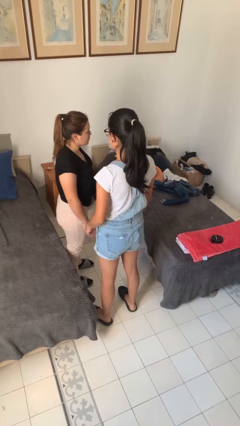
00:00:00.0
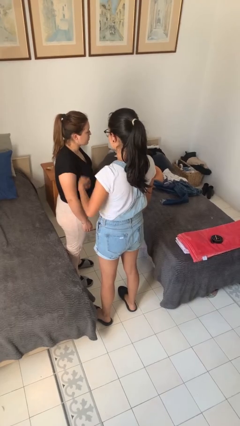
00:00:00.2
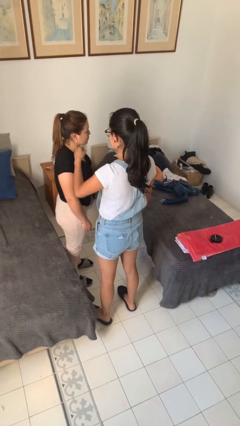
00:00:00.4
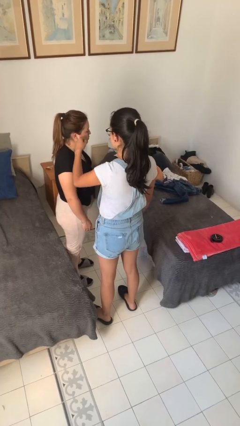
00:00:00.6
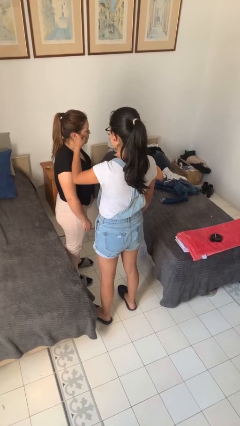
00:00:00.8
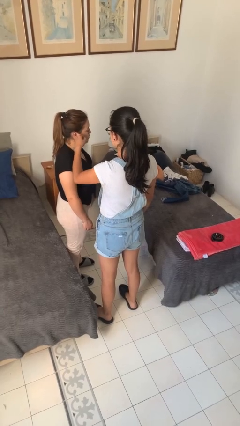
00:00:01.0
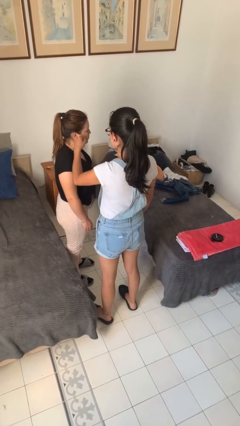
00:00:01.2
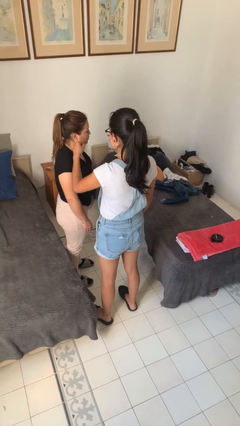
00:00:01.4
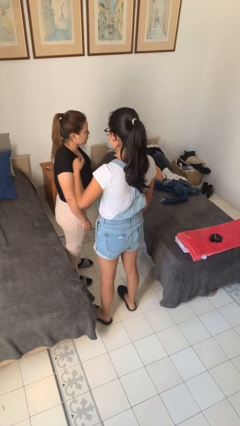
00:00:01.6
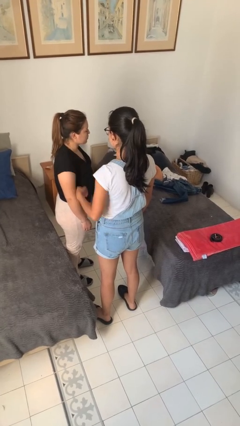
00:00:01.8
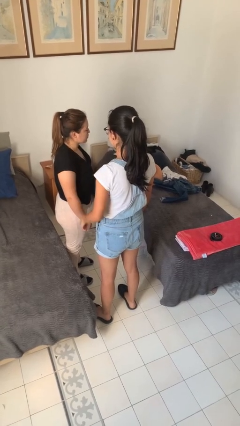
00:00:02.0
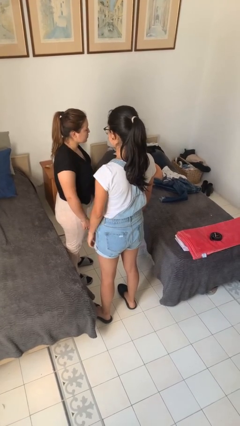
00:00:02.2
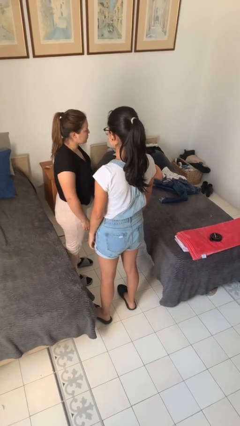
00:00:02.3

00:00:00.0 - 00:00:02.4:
person touches face of person

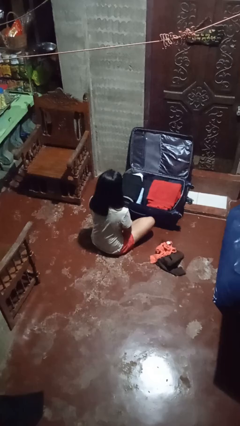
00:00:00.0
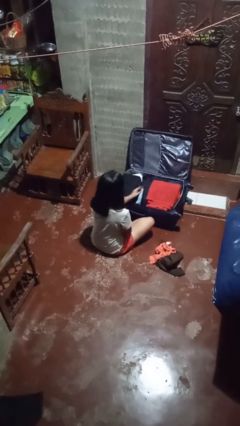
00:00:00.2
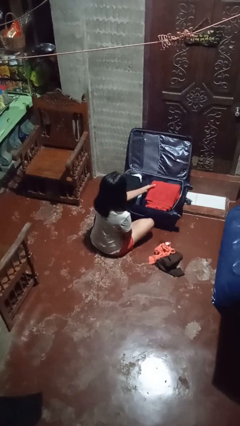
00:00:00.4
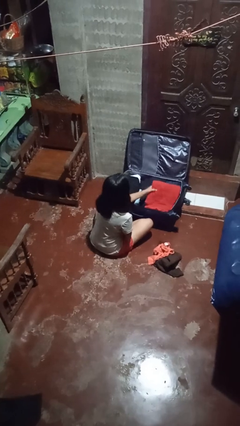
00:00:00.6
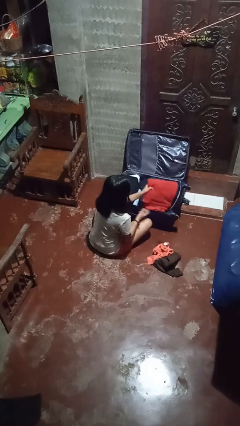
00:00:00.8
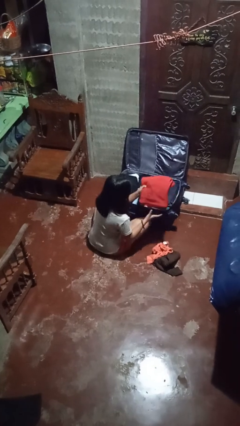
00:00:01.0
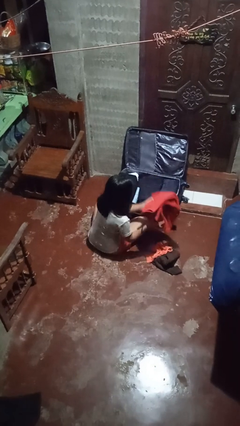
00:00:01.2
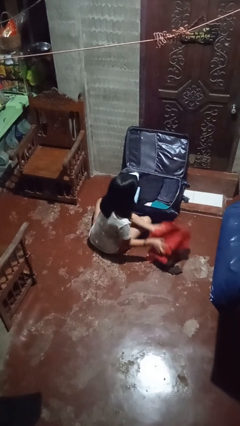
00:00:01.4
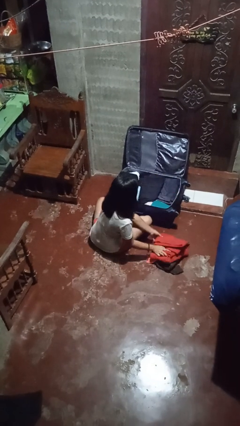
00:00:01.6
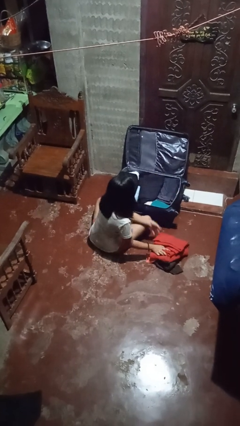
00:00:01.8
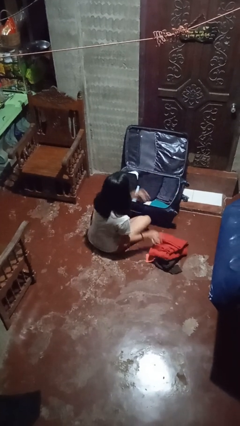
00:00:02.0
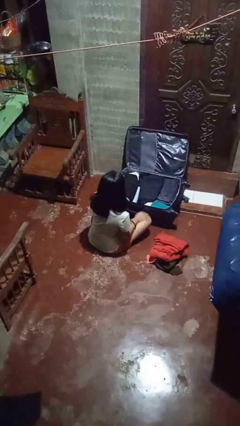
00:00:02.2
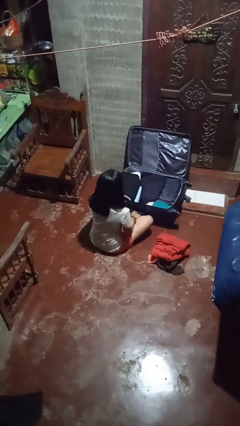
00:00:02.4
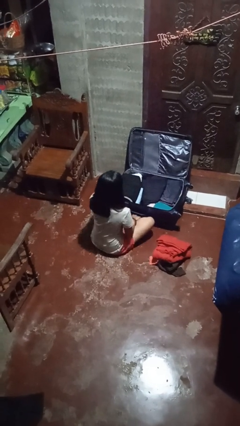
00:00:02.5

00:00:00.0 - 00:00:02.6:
person unloads clothes from suitcase

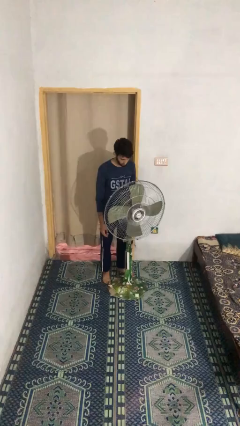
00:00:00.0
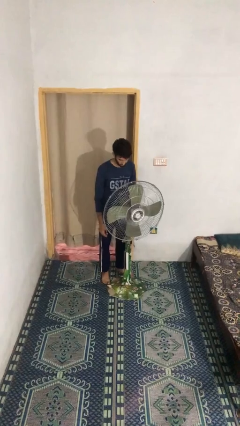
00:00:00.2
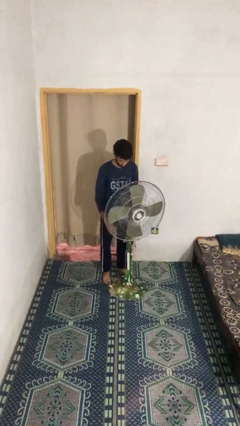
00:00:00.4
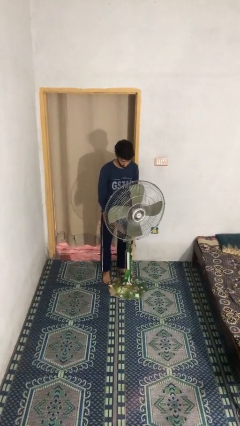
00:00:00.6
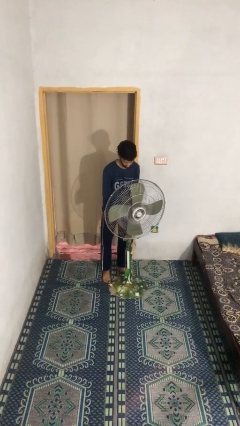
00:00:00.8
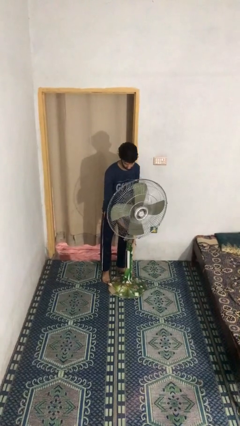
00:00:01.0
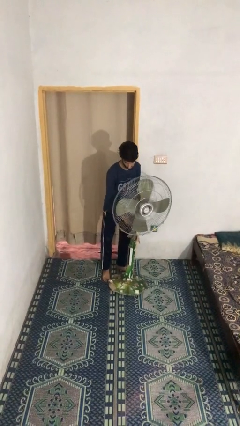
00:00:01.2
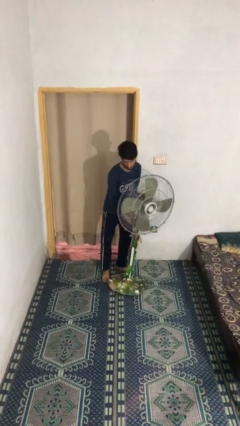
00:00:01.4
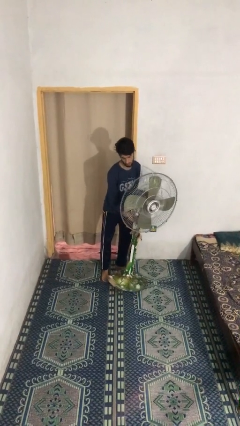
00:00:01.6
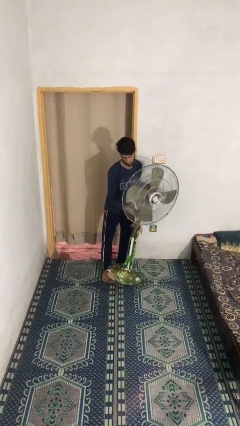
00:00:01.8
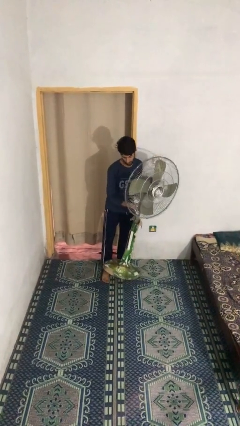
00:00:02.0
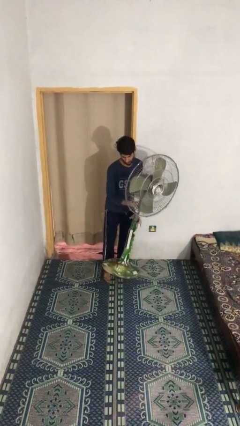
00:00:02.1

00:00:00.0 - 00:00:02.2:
person picks up object from floor

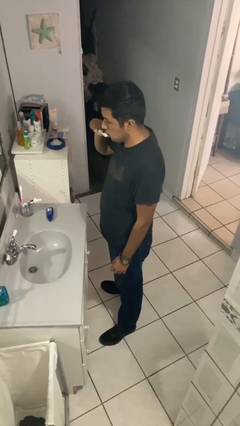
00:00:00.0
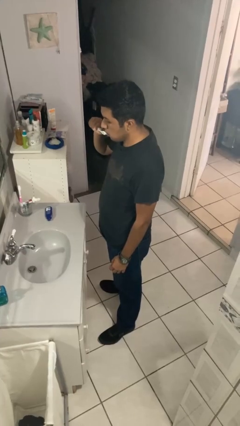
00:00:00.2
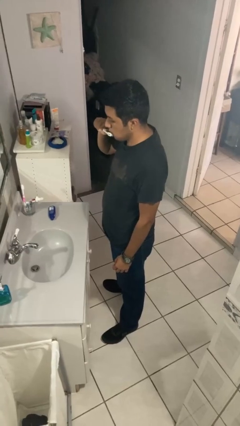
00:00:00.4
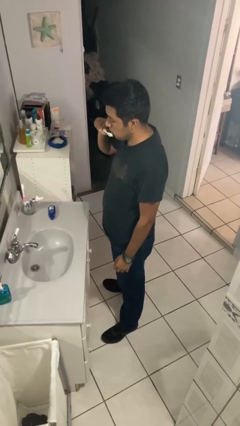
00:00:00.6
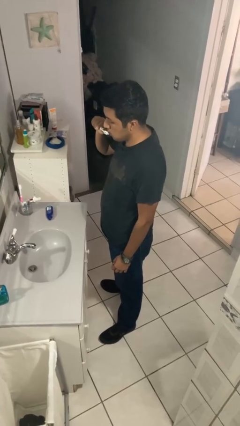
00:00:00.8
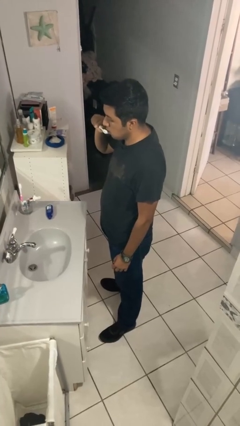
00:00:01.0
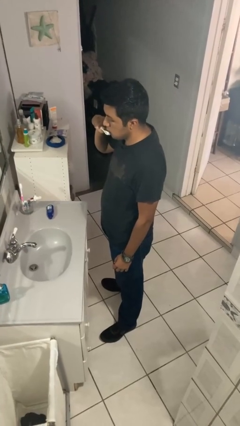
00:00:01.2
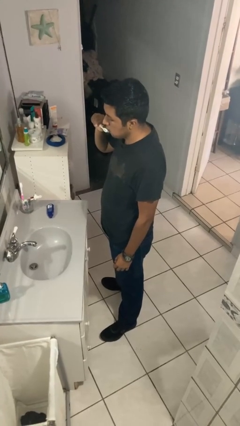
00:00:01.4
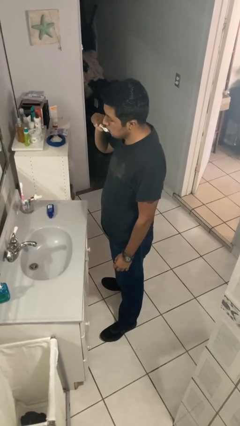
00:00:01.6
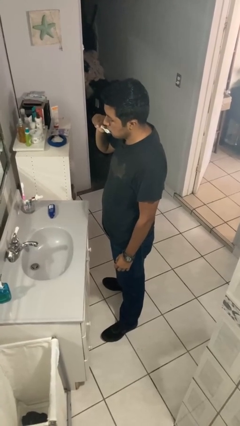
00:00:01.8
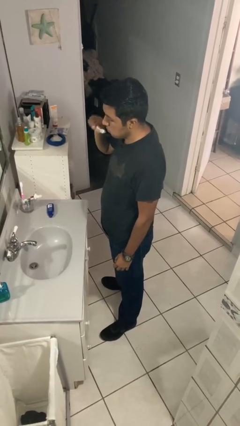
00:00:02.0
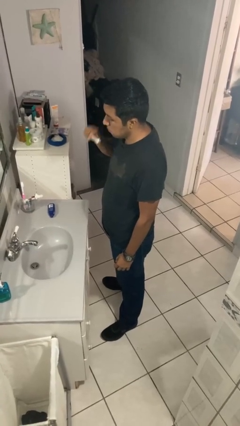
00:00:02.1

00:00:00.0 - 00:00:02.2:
person brushes teeth

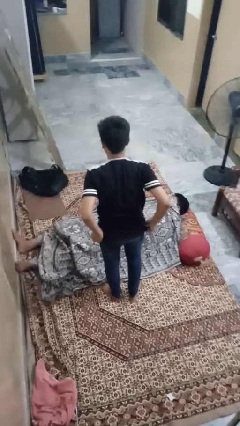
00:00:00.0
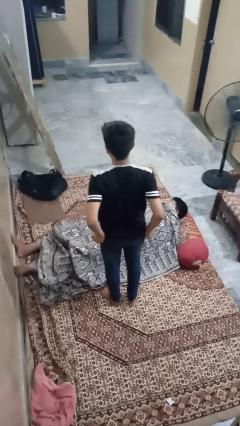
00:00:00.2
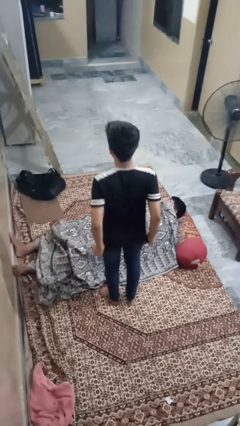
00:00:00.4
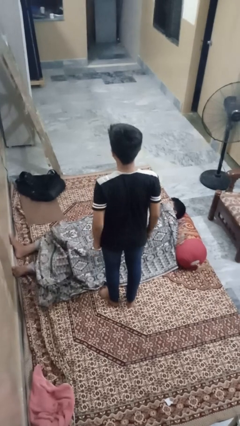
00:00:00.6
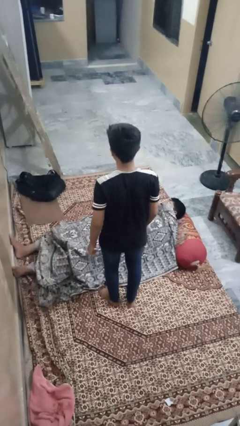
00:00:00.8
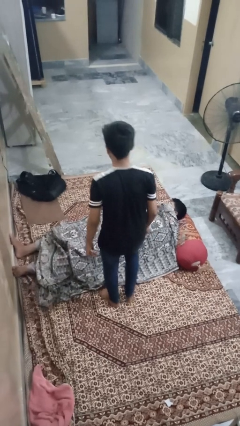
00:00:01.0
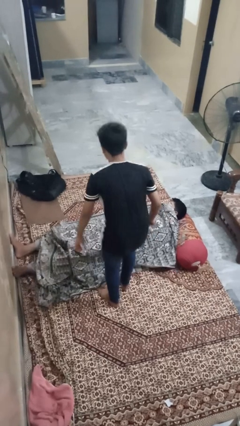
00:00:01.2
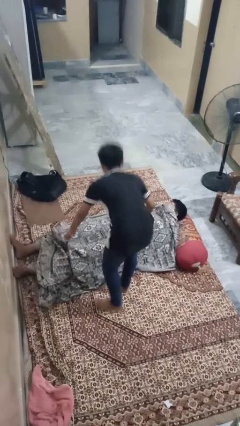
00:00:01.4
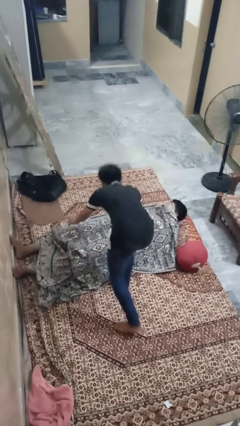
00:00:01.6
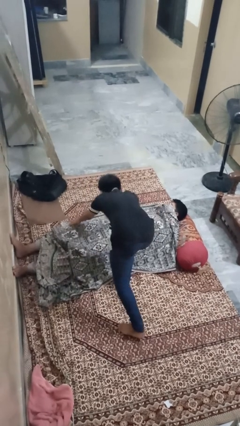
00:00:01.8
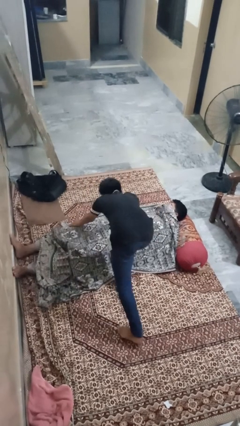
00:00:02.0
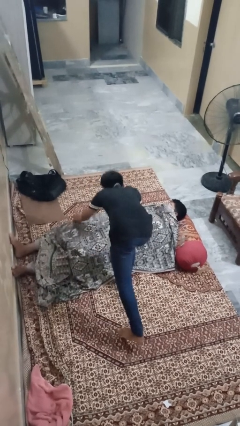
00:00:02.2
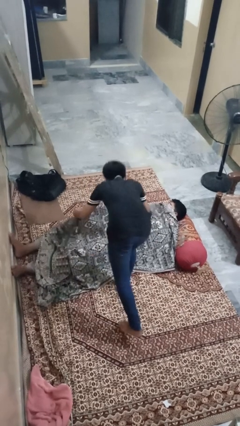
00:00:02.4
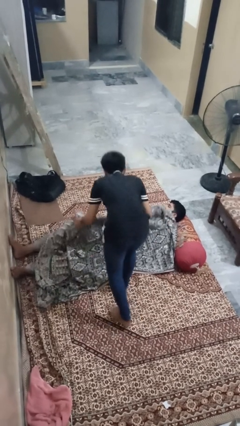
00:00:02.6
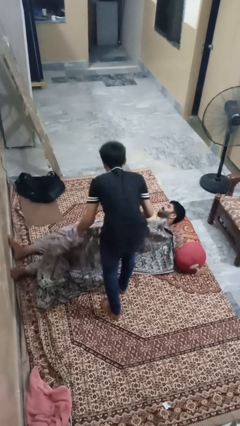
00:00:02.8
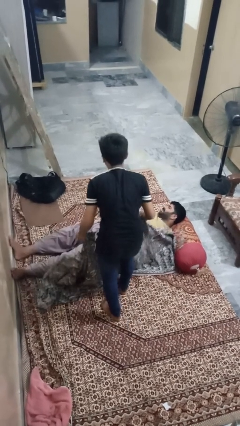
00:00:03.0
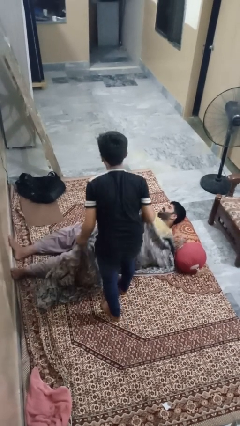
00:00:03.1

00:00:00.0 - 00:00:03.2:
person uncovers friend with blanket

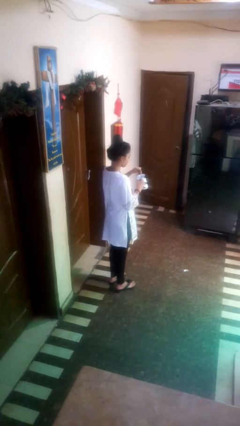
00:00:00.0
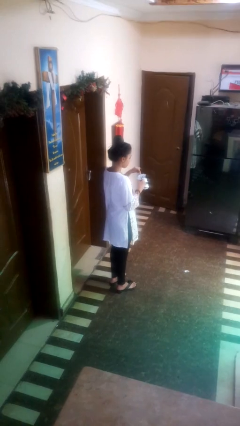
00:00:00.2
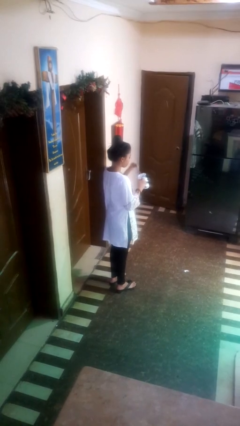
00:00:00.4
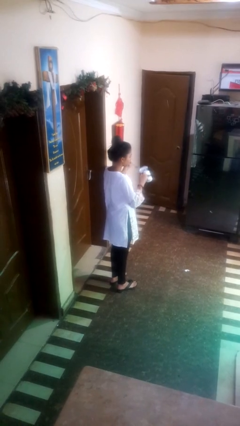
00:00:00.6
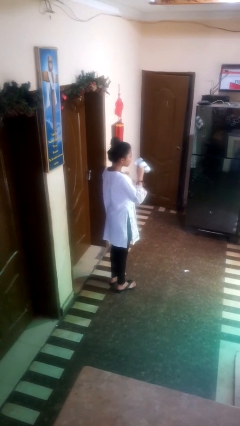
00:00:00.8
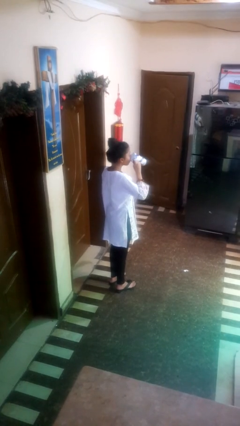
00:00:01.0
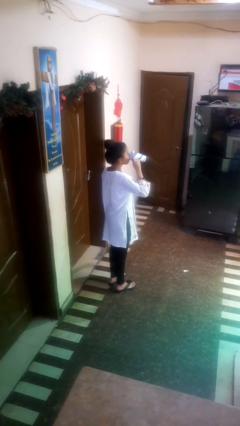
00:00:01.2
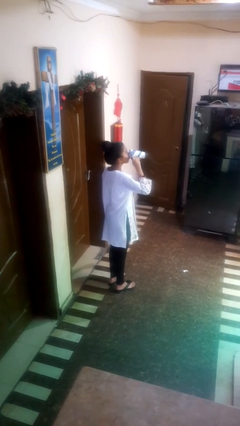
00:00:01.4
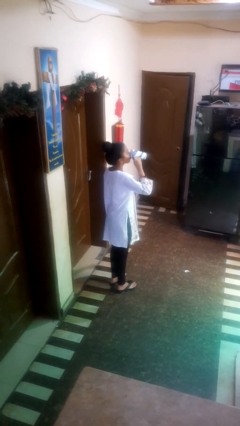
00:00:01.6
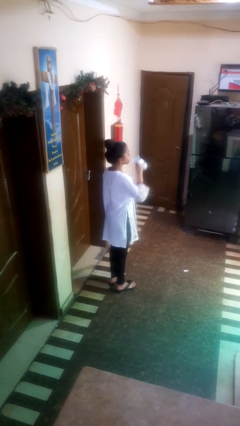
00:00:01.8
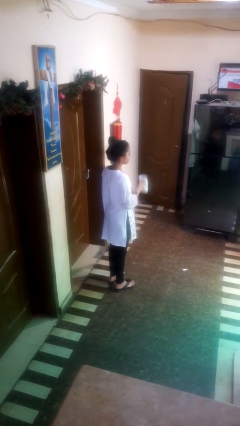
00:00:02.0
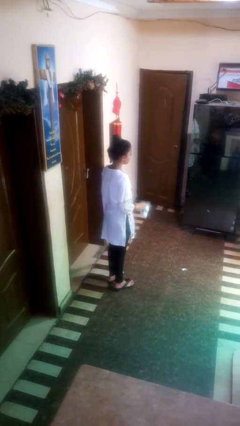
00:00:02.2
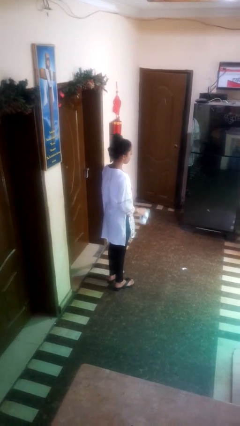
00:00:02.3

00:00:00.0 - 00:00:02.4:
person drinks from mug

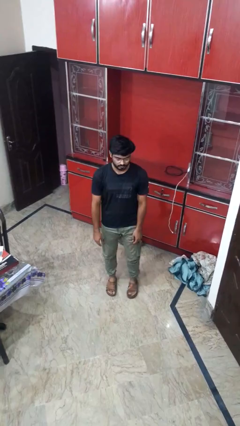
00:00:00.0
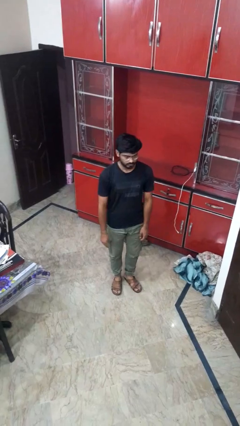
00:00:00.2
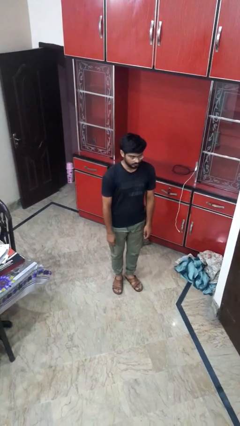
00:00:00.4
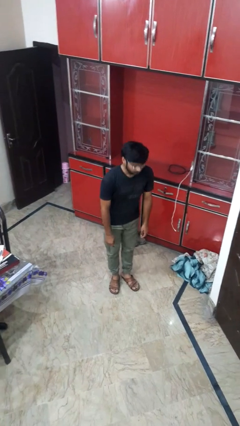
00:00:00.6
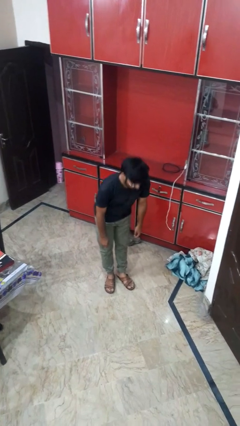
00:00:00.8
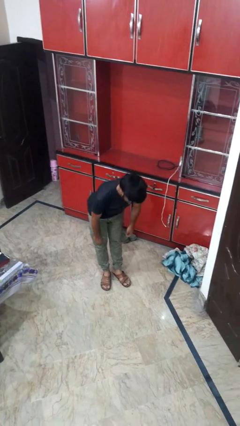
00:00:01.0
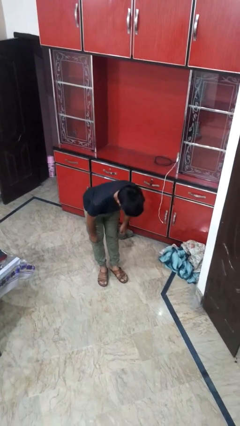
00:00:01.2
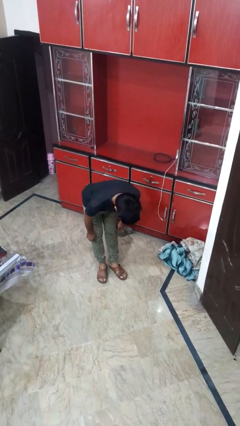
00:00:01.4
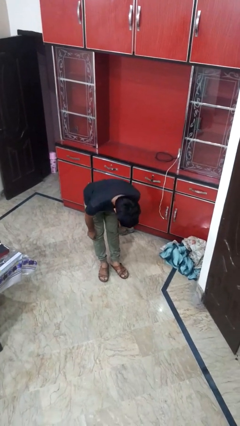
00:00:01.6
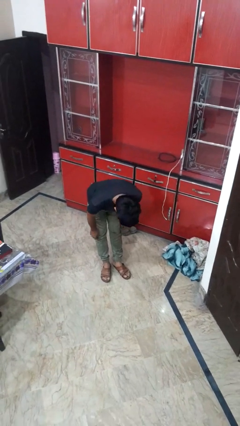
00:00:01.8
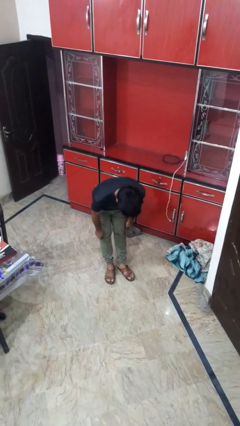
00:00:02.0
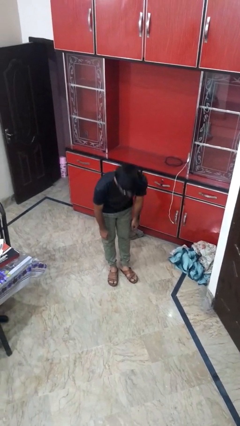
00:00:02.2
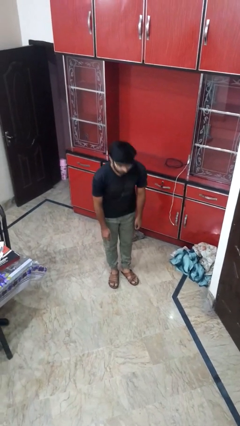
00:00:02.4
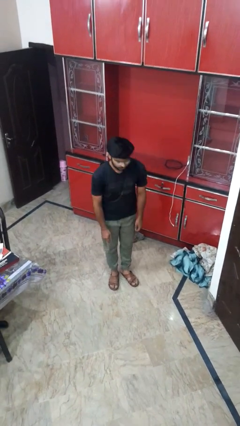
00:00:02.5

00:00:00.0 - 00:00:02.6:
person bows
